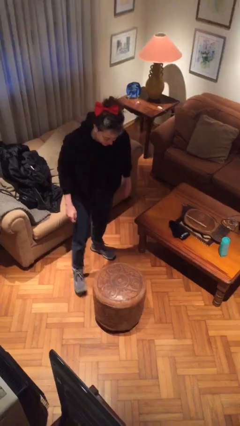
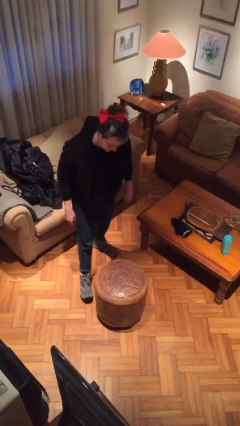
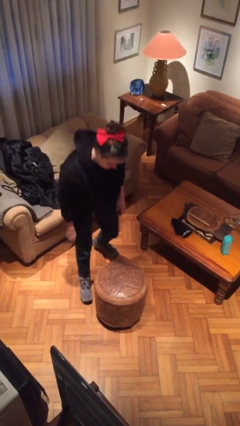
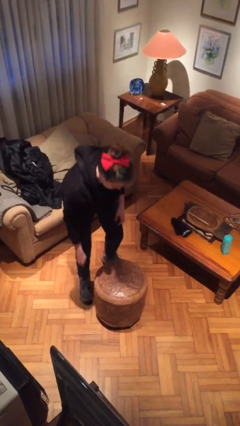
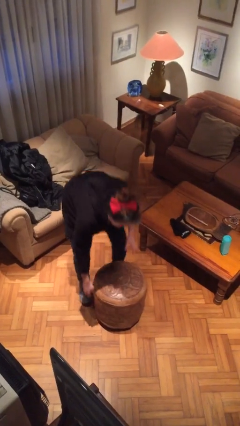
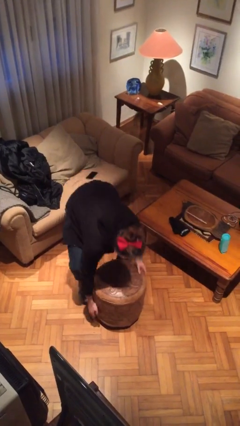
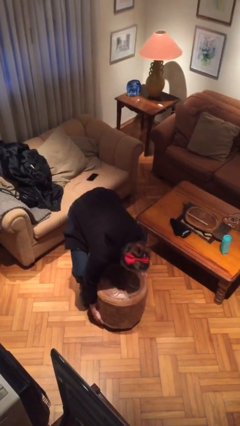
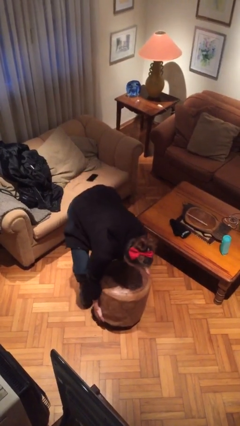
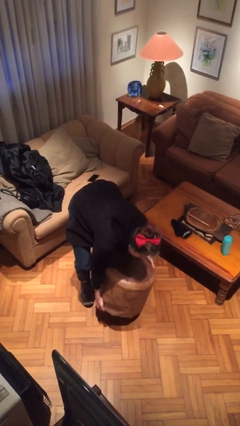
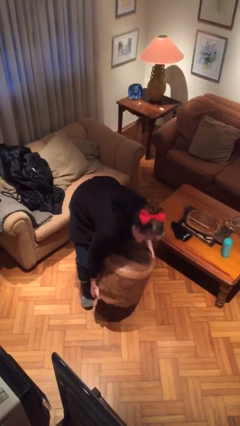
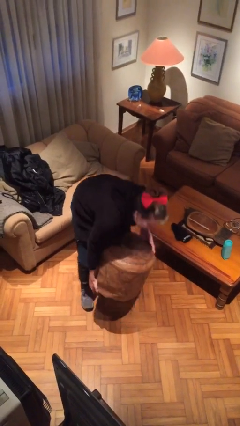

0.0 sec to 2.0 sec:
person picks up object from floor

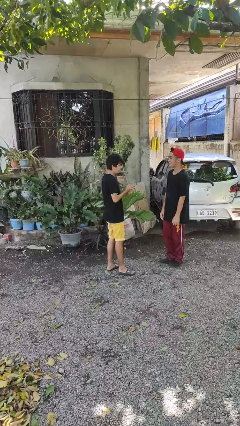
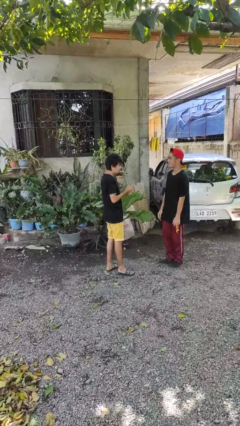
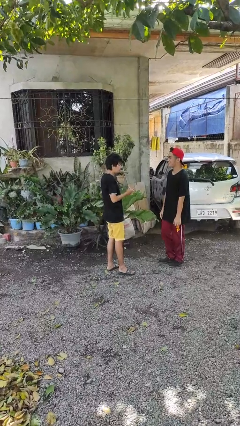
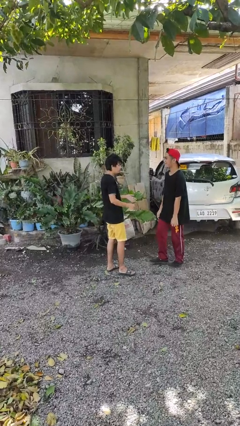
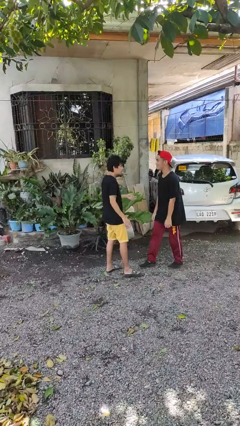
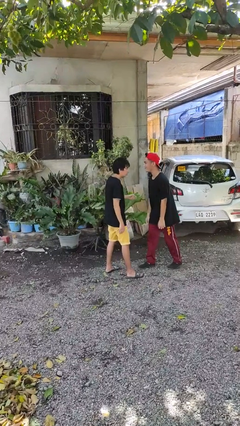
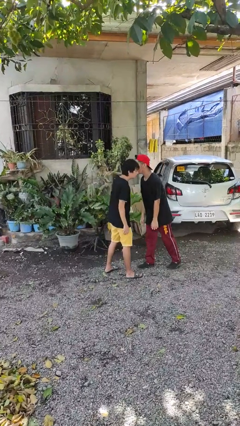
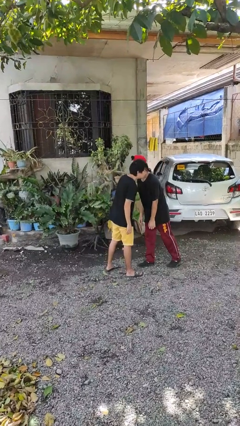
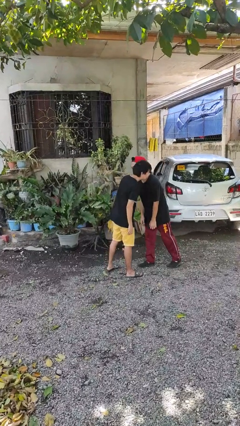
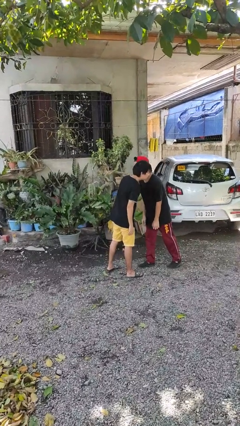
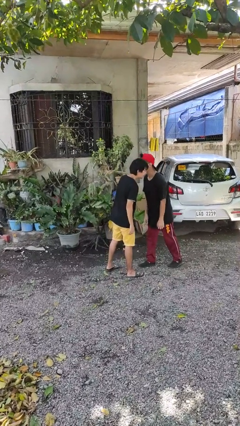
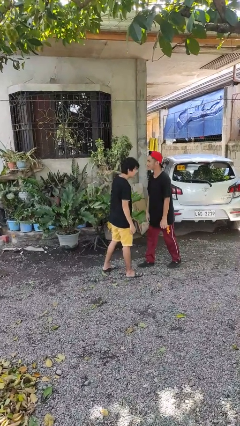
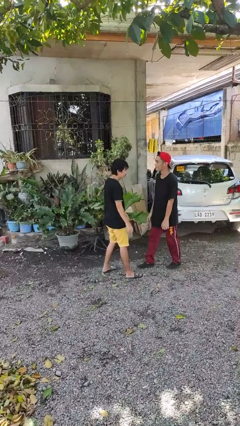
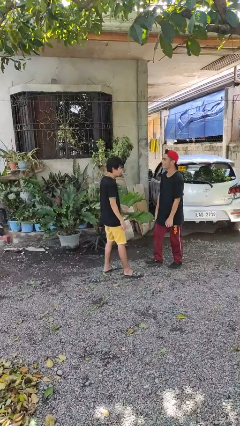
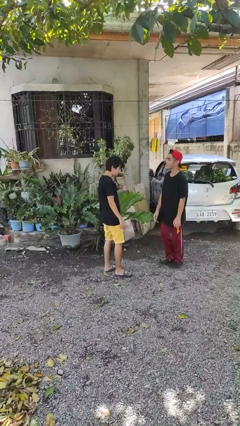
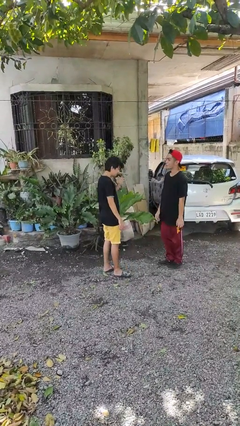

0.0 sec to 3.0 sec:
person kisses cheek of person

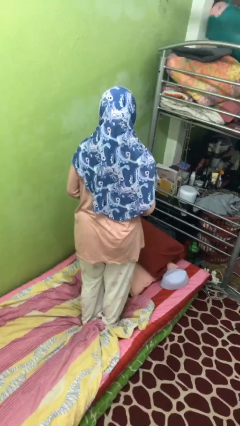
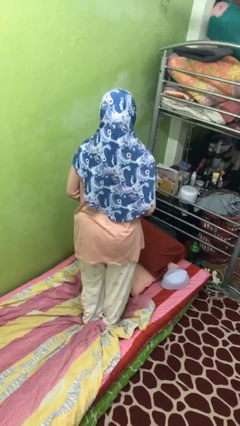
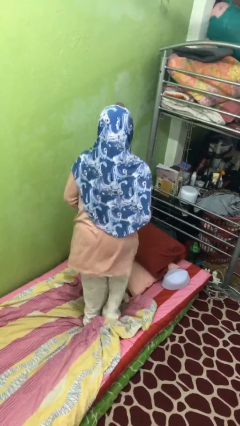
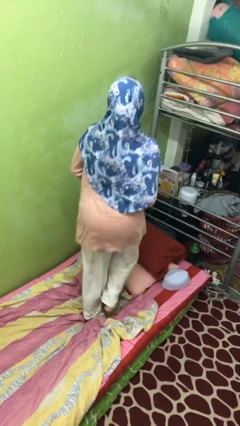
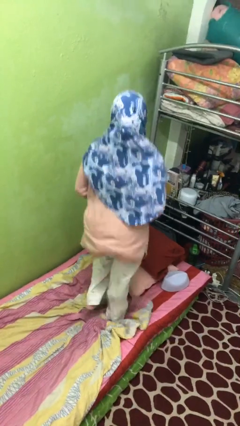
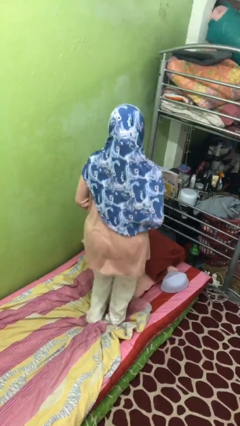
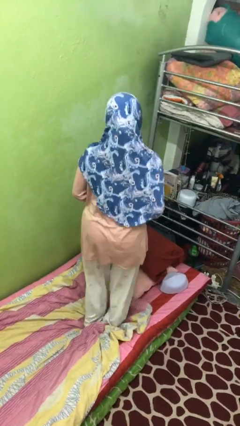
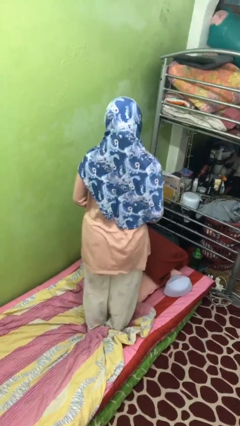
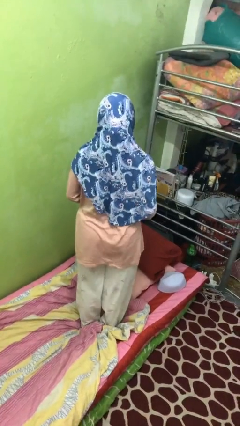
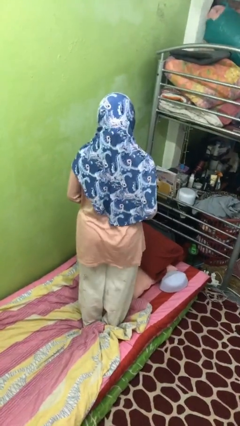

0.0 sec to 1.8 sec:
person jumps on bed

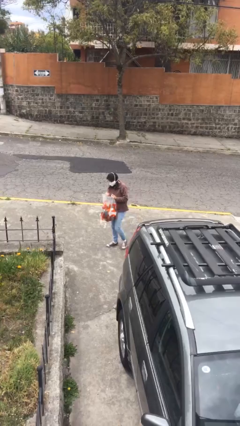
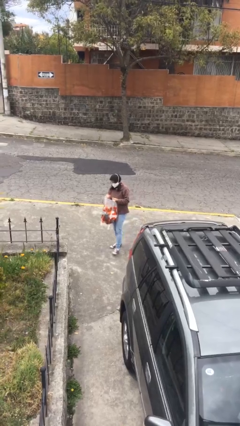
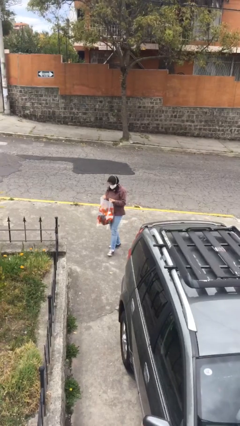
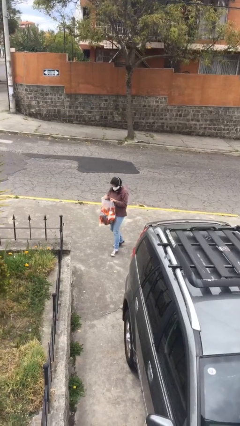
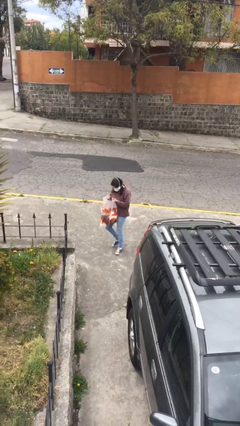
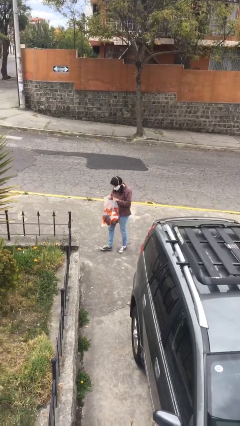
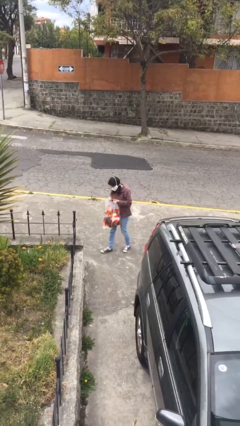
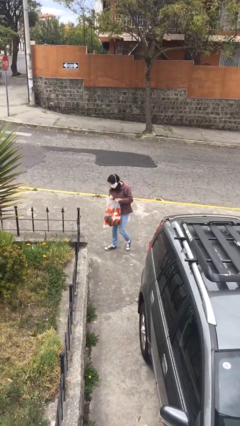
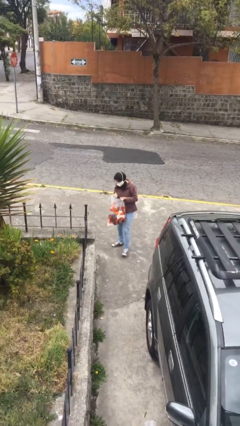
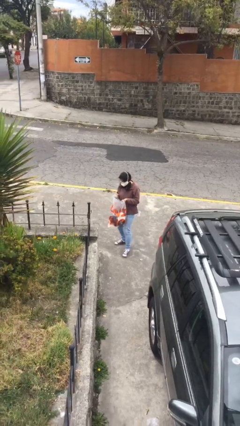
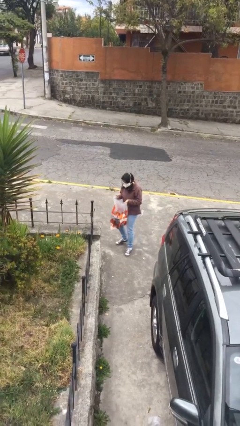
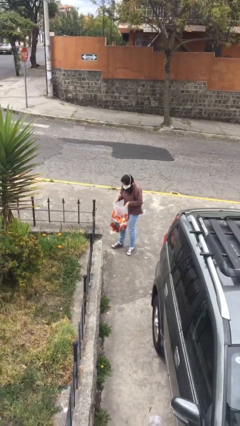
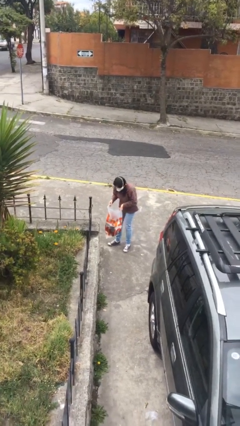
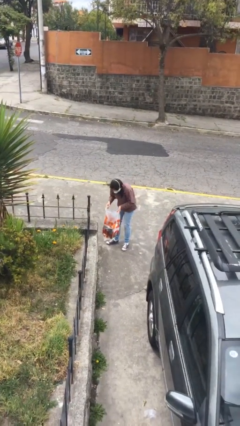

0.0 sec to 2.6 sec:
person carries heavy object

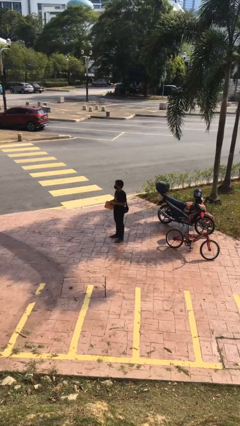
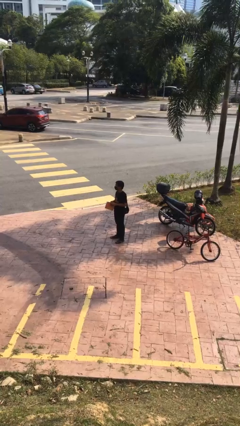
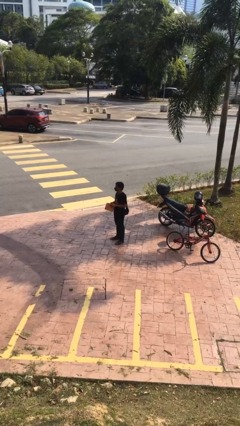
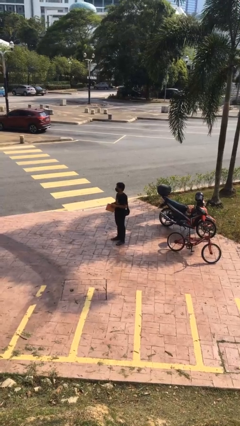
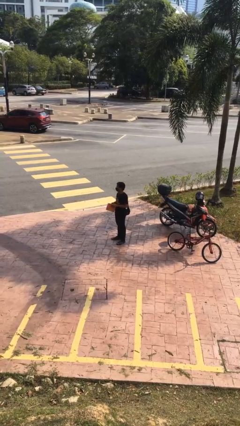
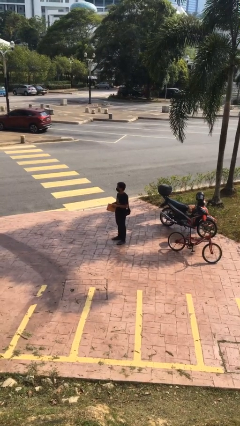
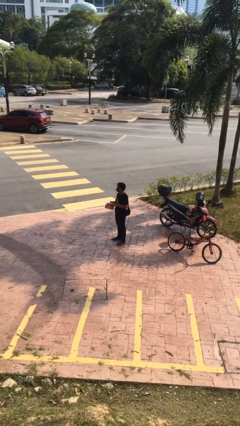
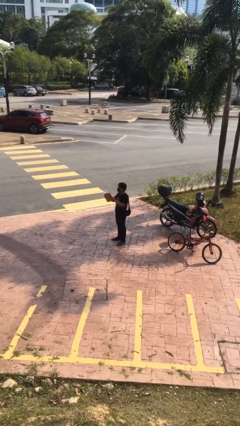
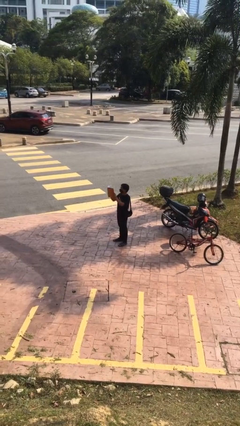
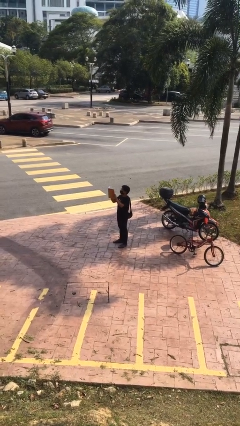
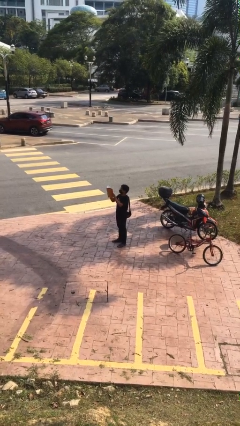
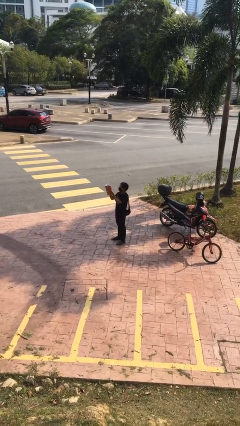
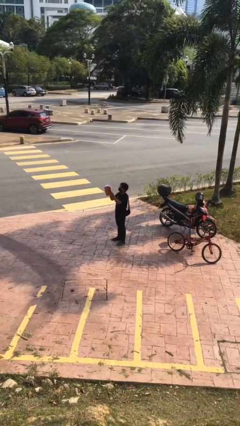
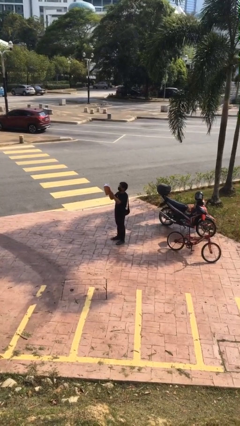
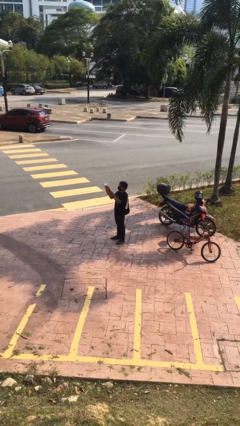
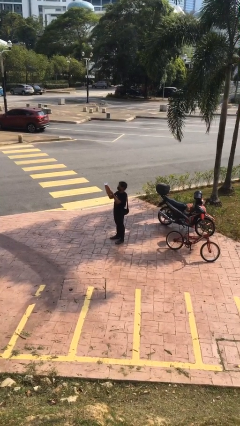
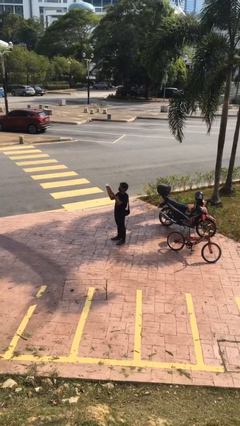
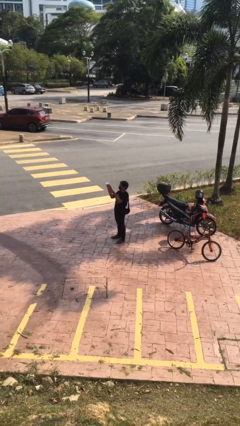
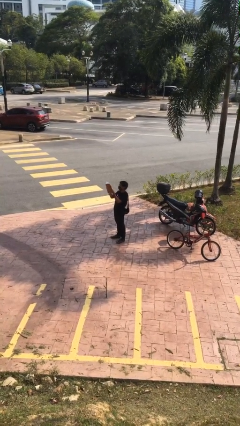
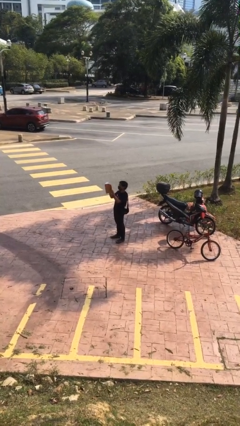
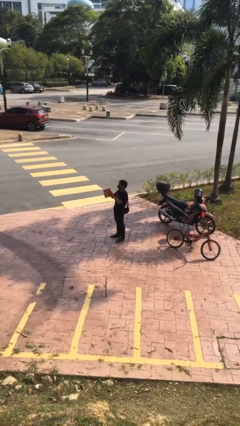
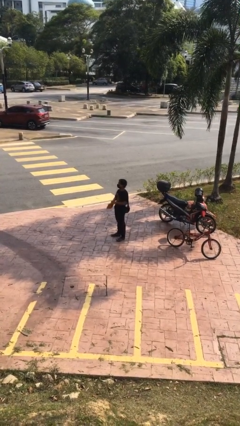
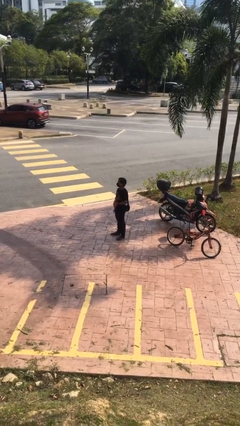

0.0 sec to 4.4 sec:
person reads document

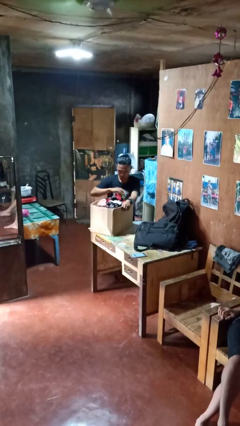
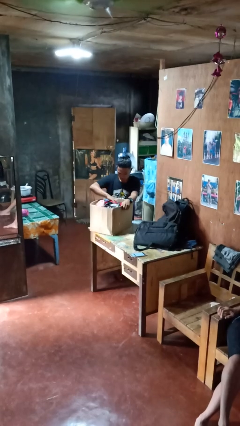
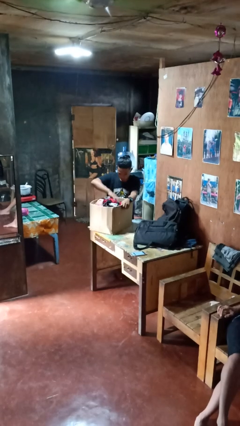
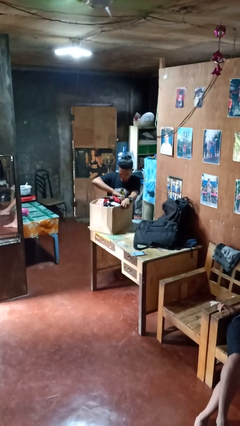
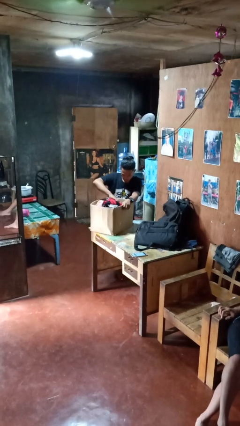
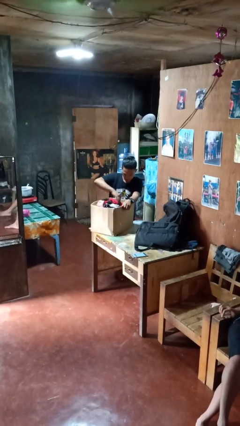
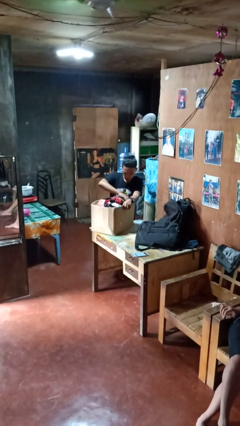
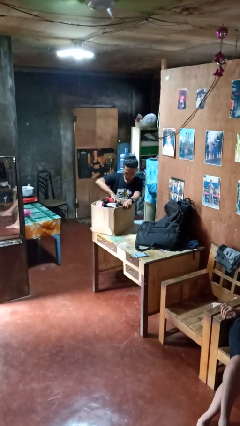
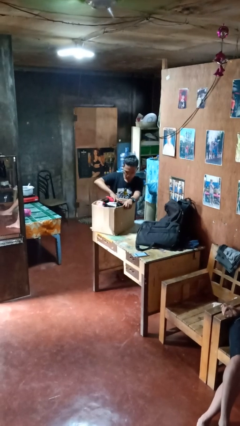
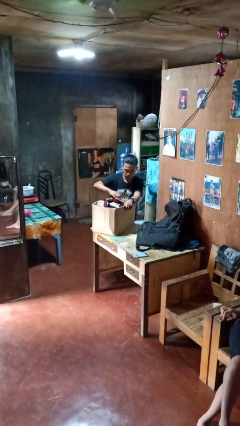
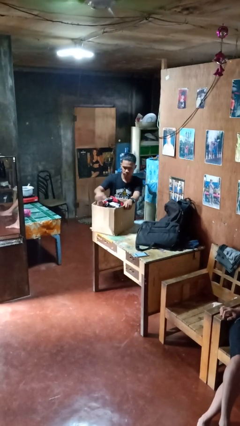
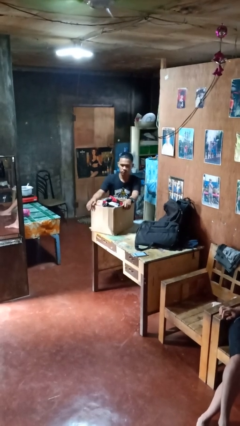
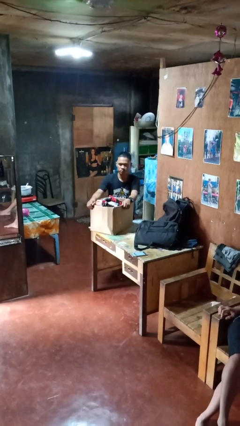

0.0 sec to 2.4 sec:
person searches in box

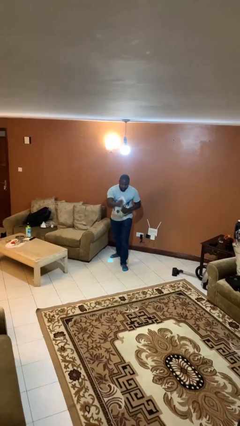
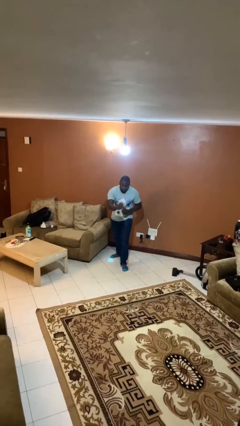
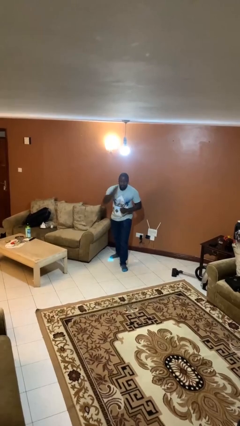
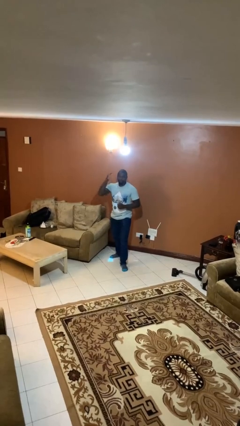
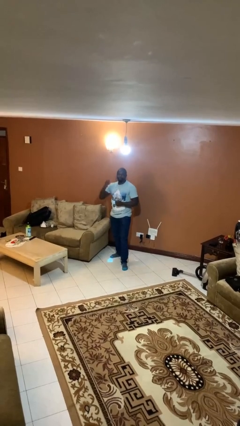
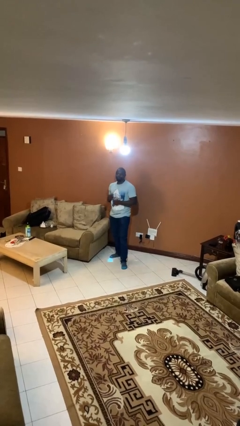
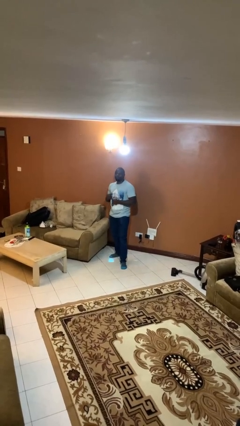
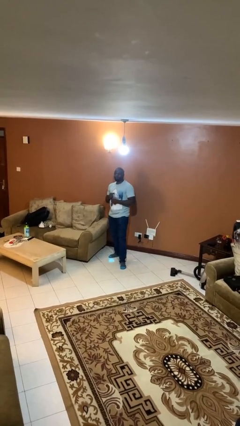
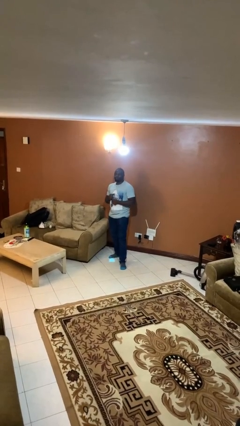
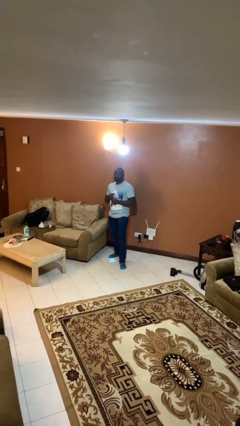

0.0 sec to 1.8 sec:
person karate chop
